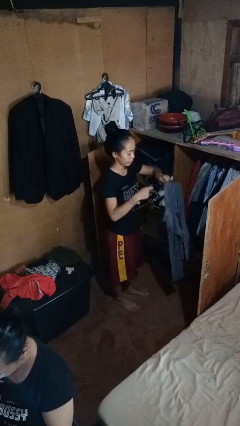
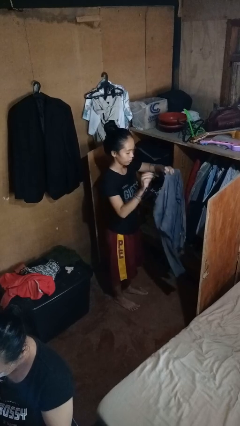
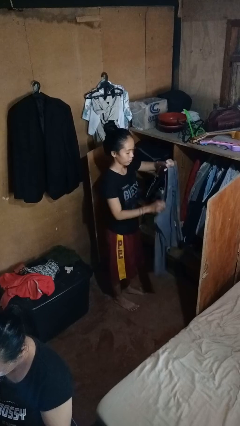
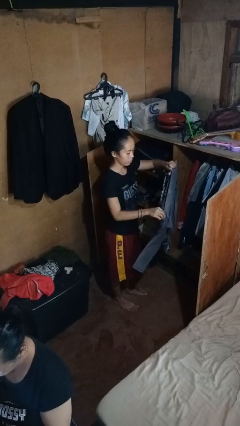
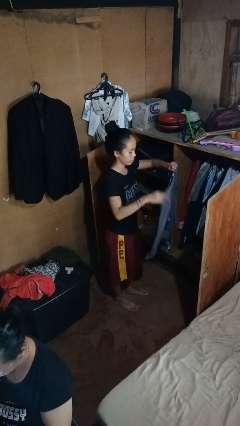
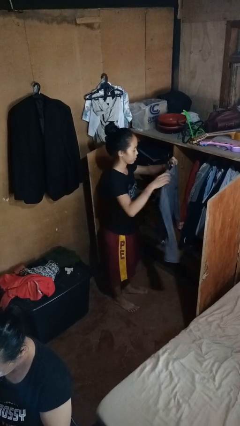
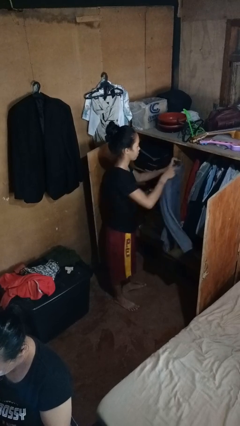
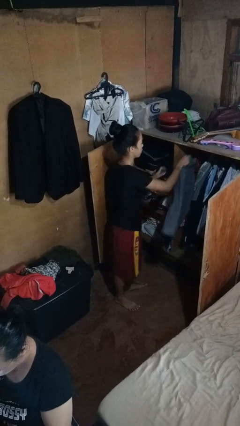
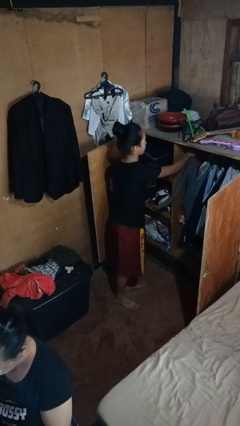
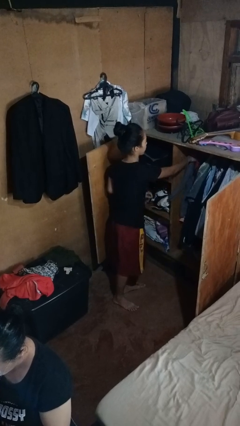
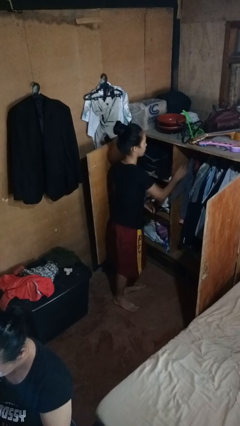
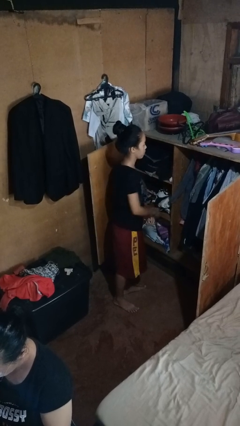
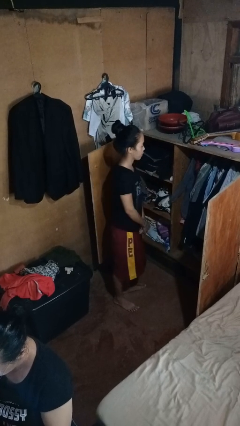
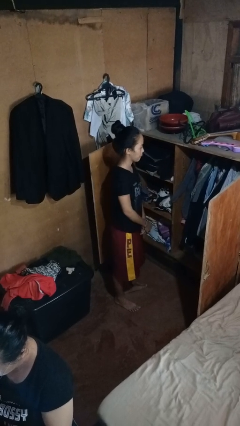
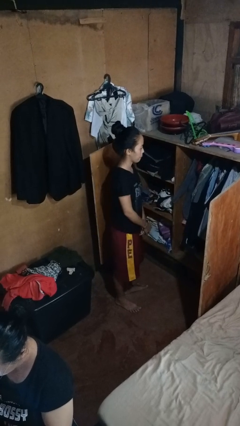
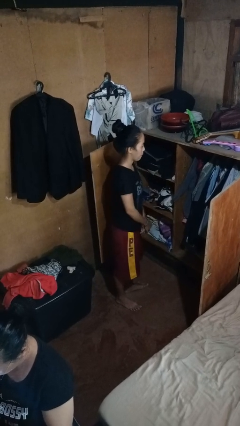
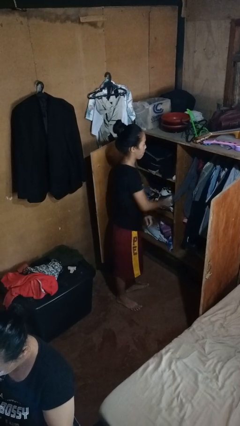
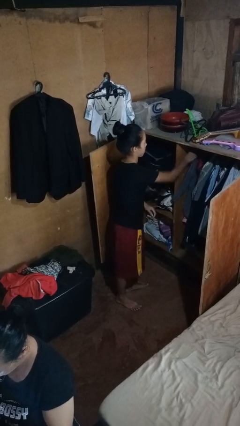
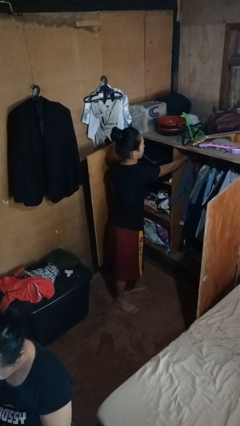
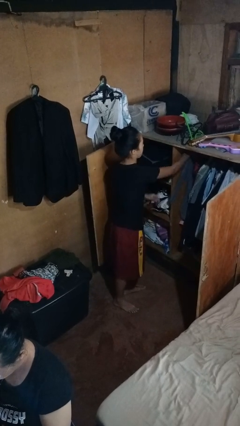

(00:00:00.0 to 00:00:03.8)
person puts clothes into closet

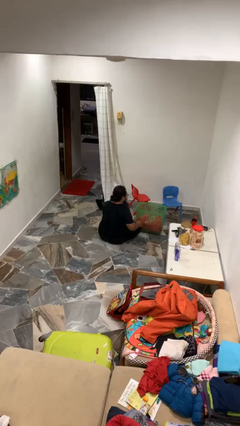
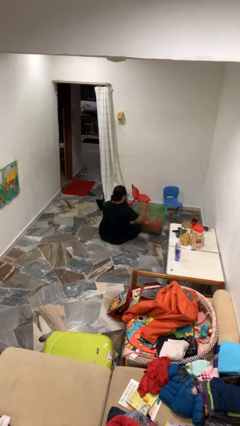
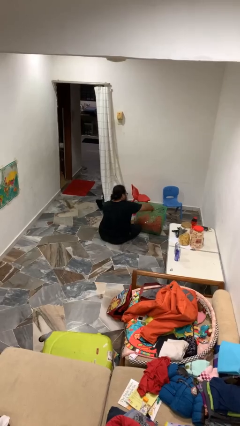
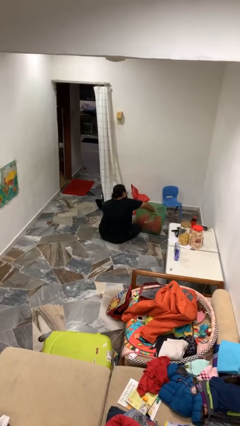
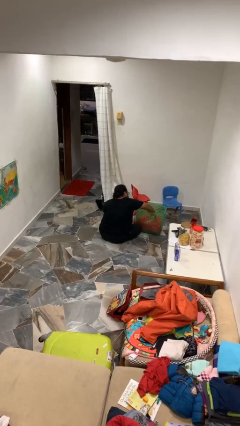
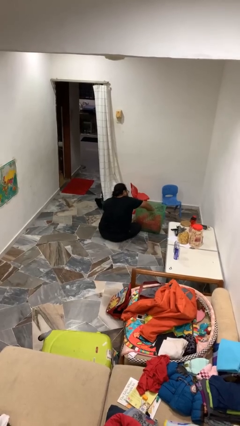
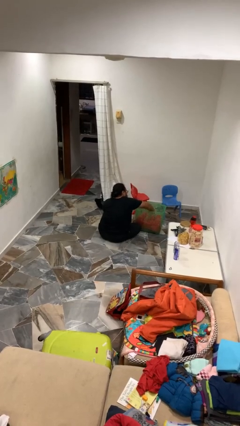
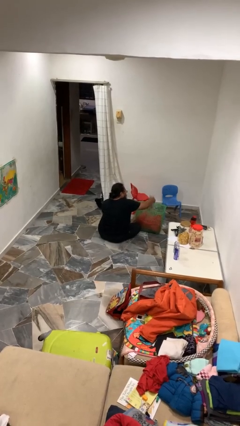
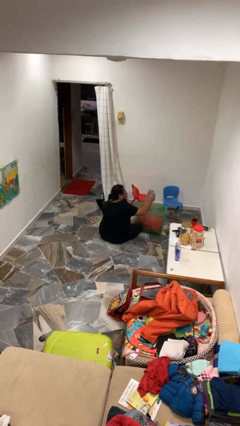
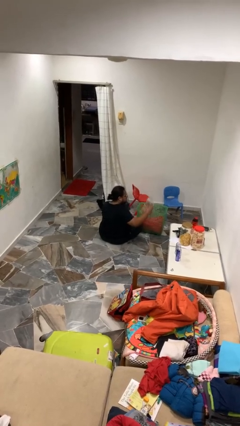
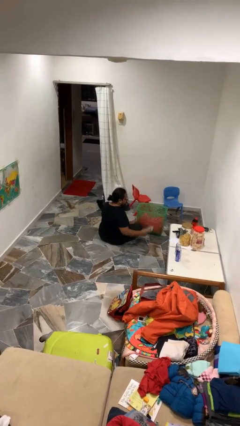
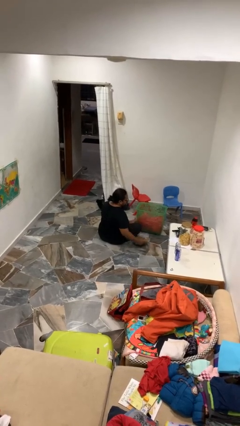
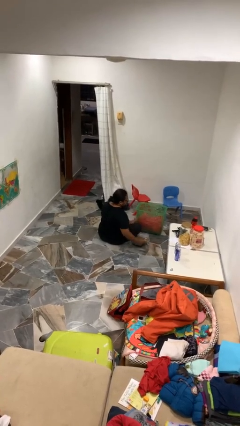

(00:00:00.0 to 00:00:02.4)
person takes object from basket

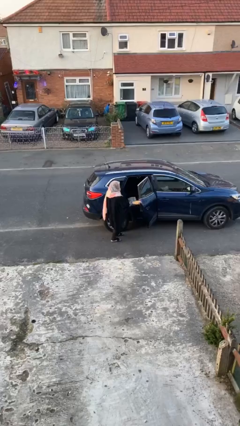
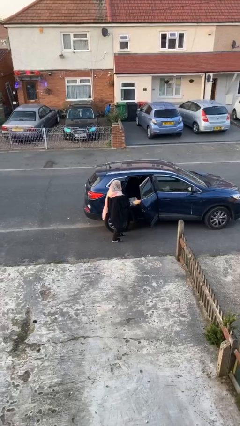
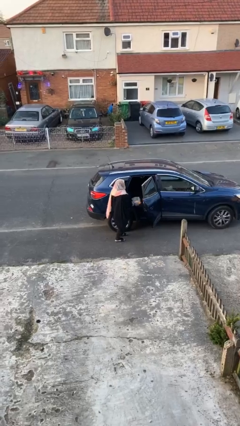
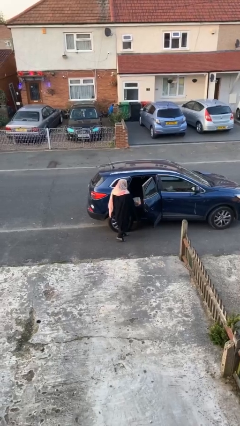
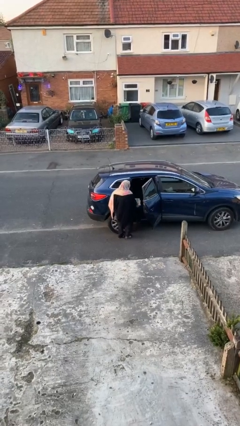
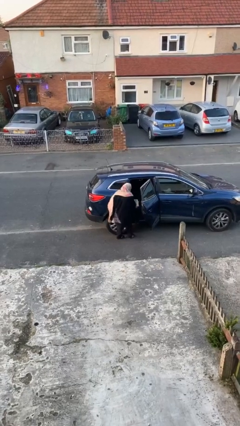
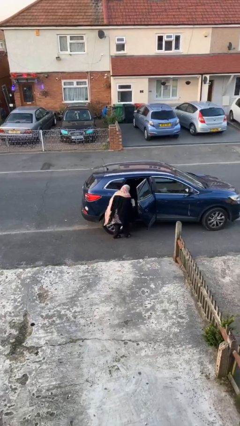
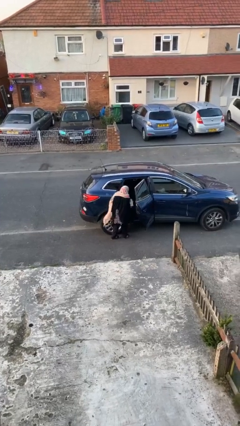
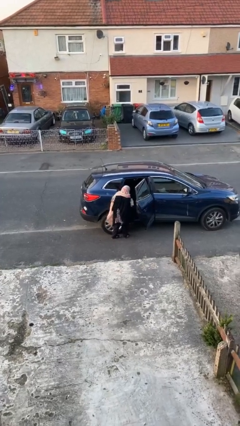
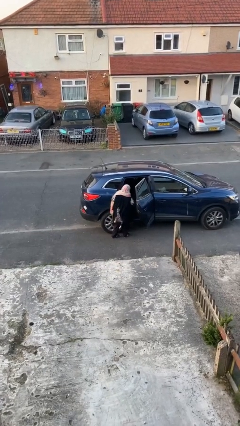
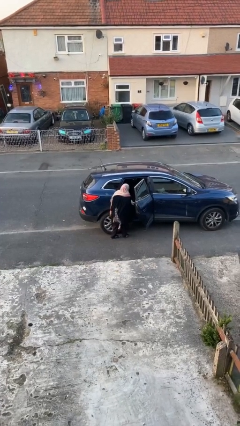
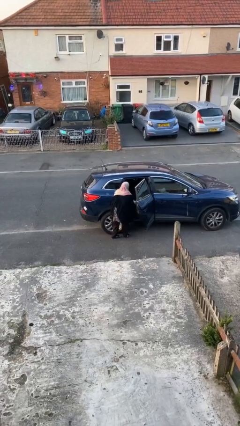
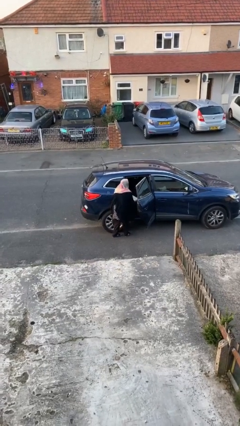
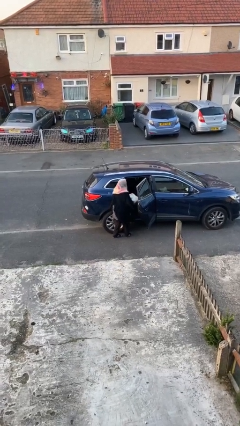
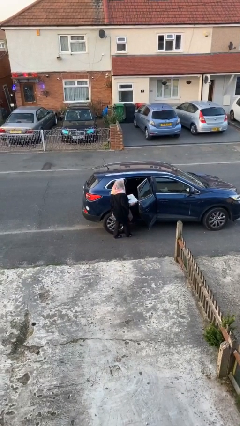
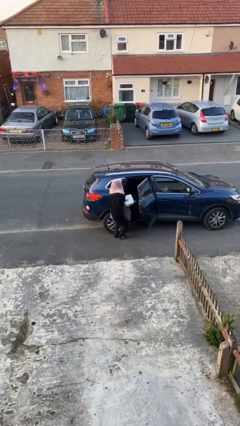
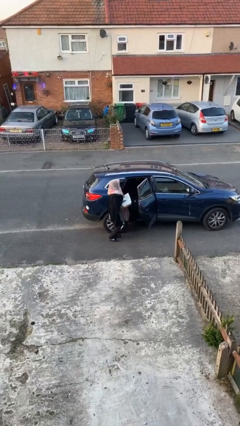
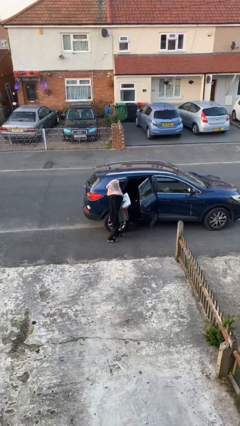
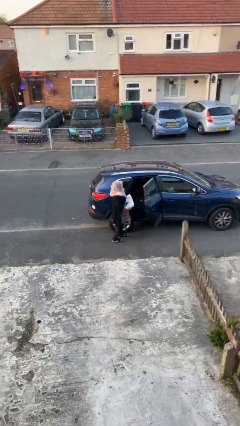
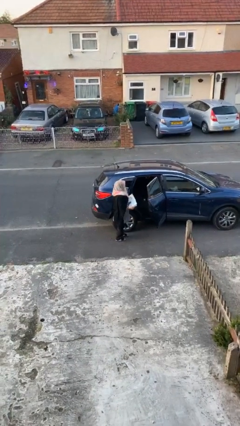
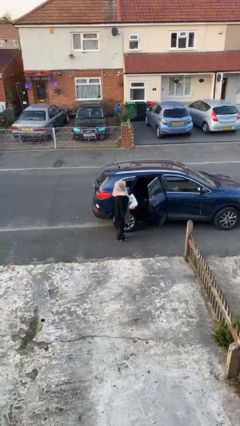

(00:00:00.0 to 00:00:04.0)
person unloads car

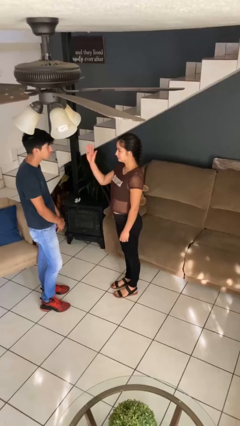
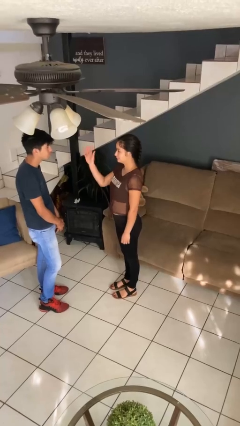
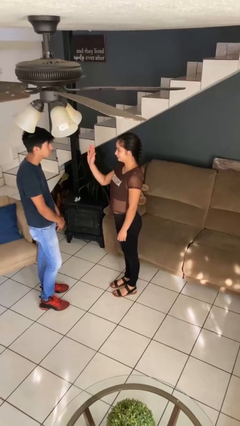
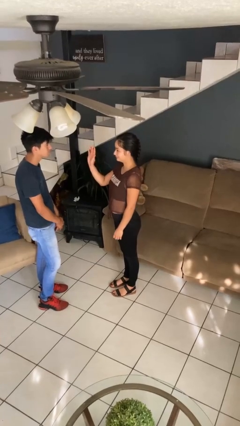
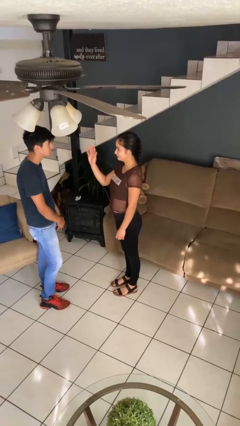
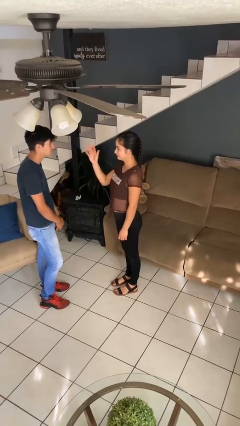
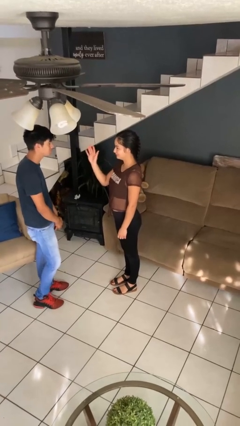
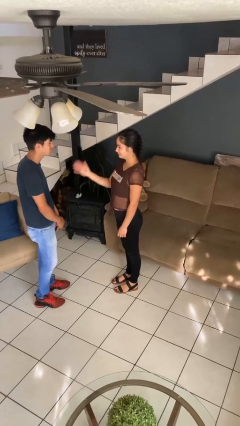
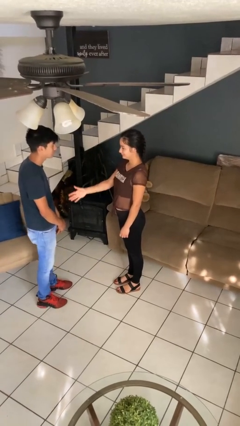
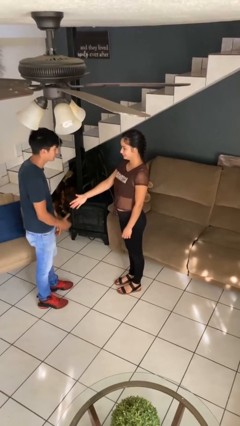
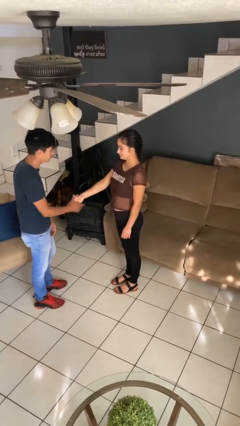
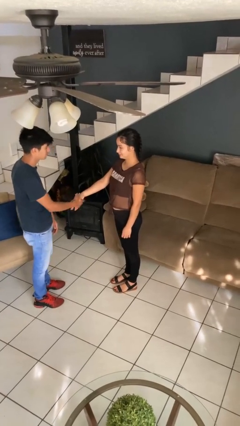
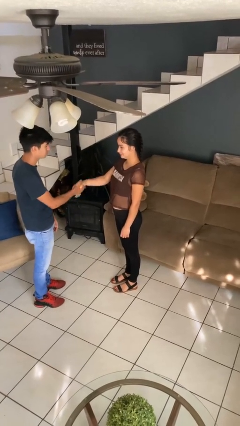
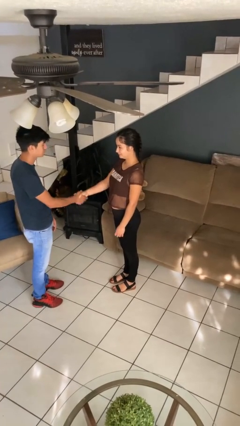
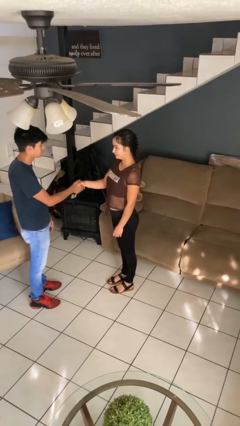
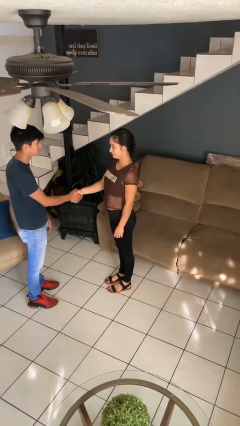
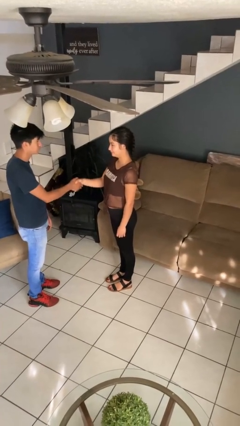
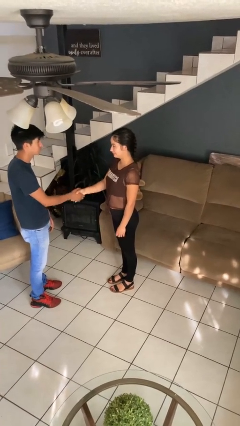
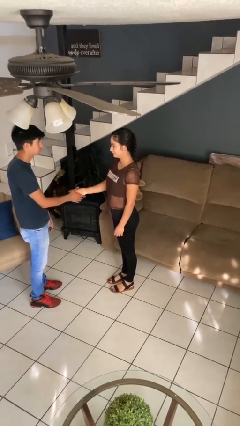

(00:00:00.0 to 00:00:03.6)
person waves at person

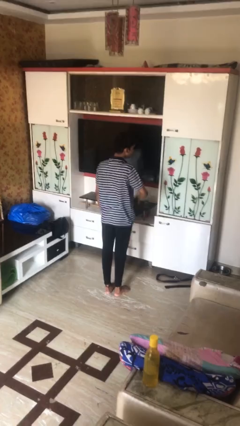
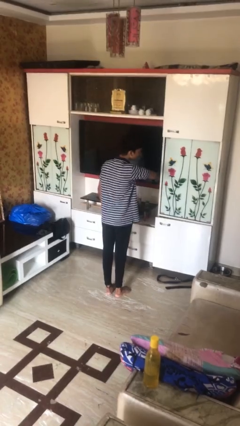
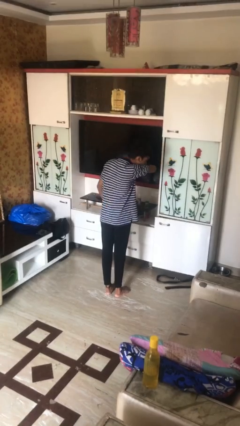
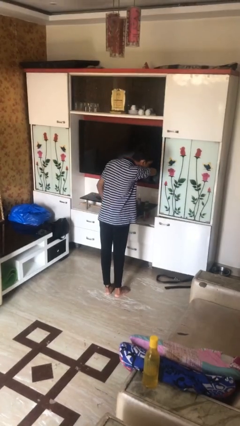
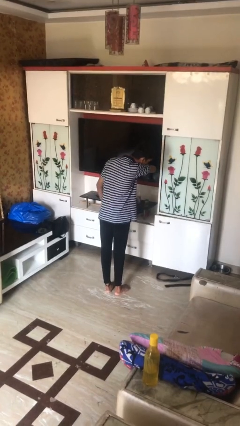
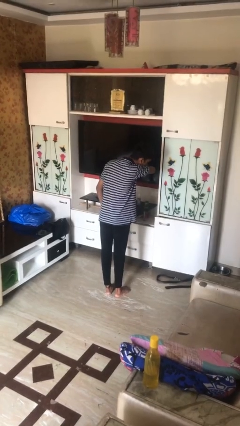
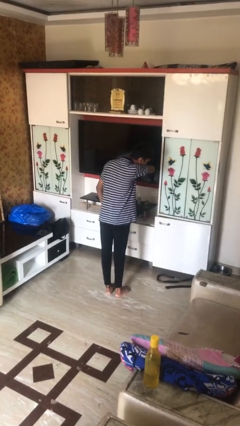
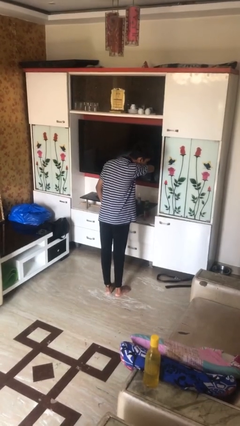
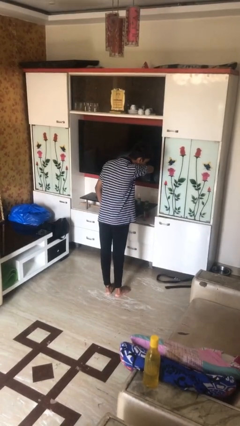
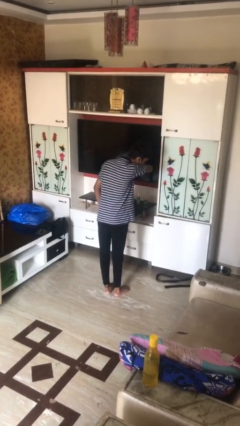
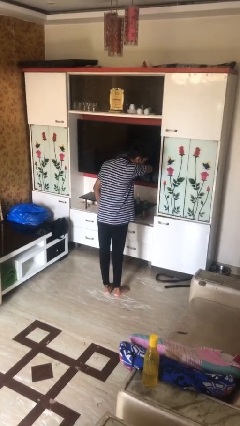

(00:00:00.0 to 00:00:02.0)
person sneezes into arm

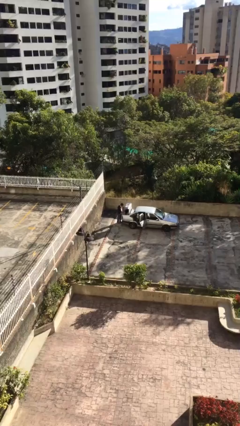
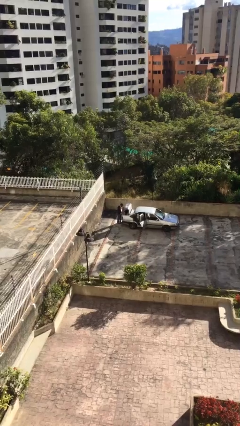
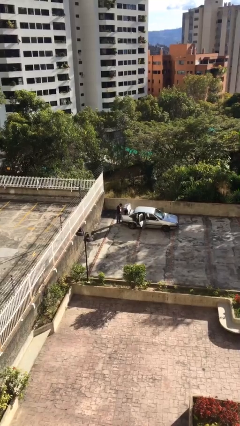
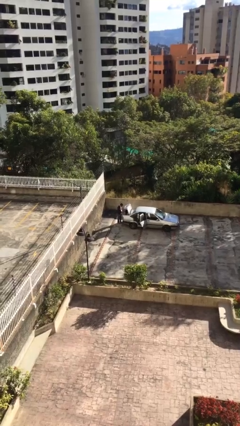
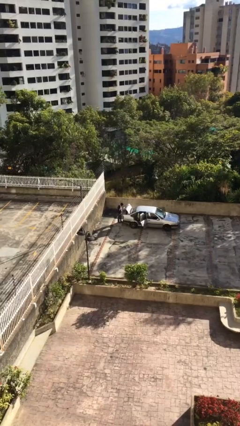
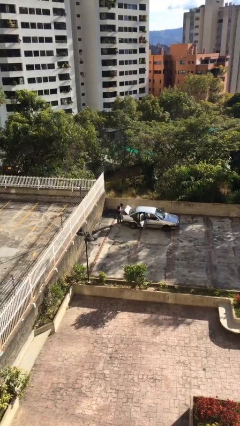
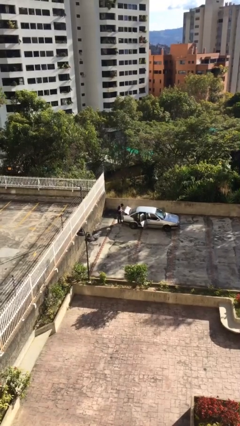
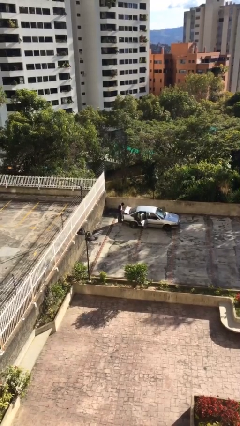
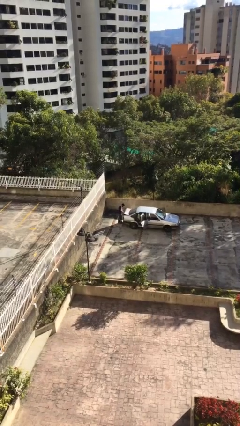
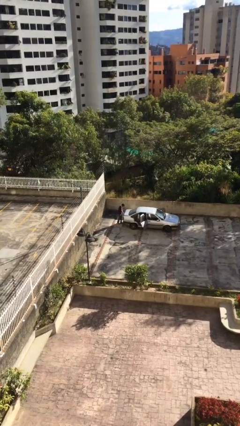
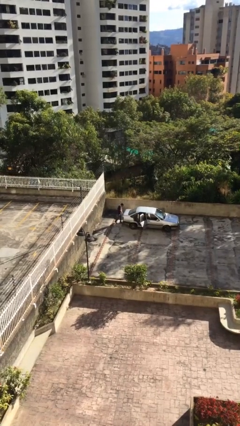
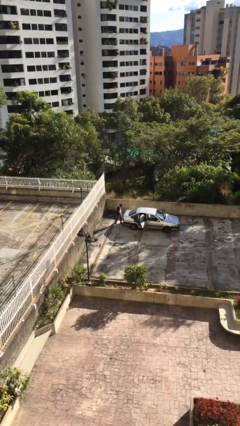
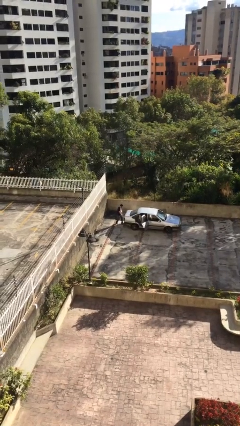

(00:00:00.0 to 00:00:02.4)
person closes car trunk
